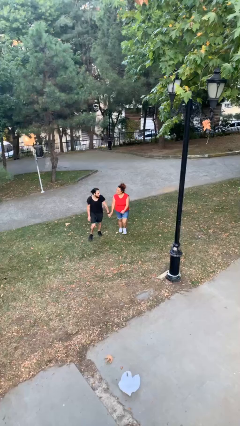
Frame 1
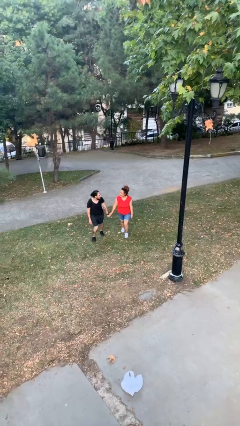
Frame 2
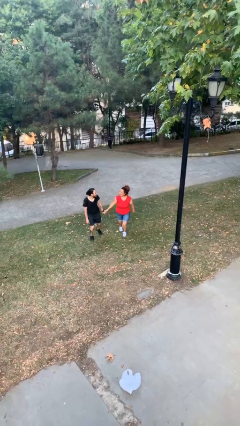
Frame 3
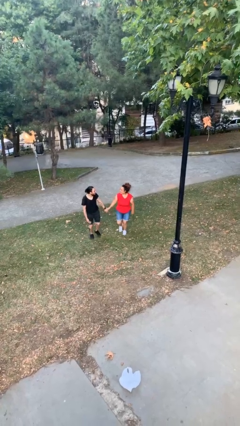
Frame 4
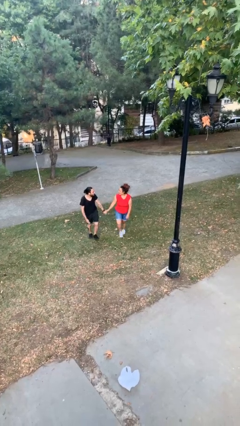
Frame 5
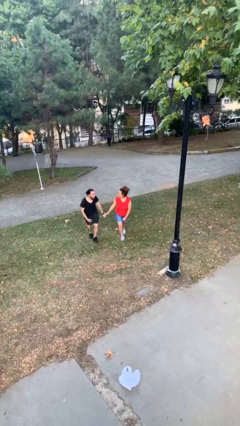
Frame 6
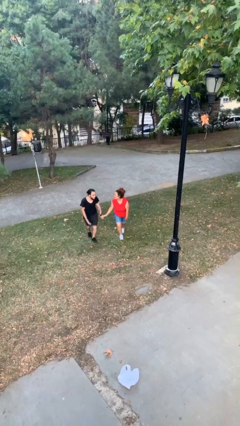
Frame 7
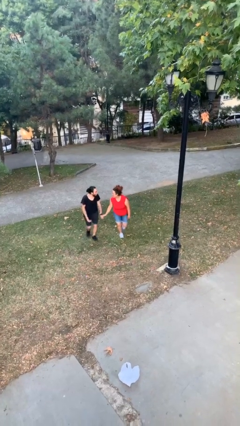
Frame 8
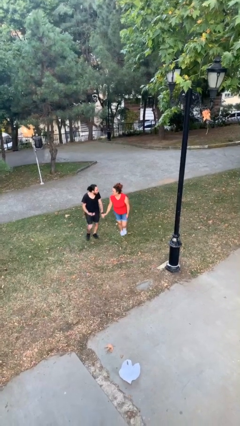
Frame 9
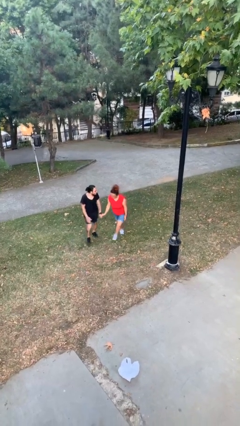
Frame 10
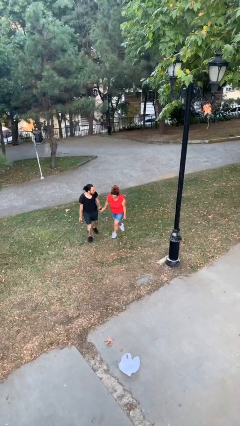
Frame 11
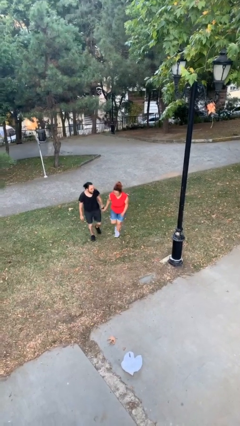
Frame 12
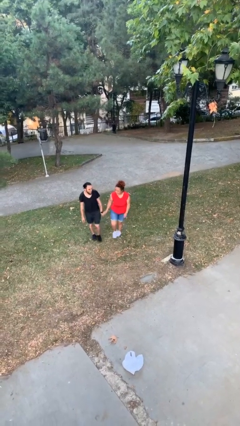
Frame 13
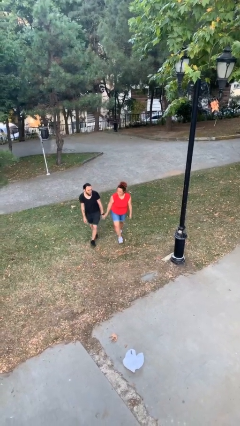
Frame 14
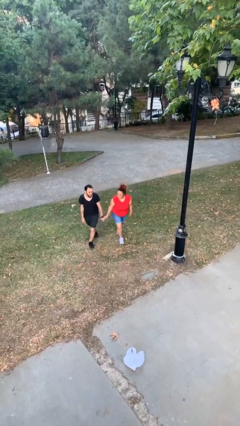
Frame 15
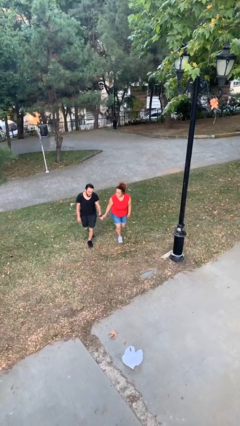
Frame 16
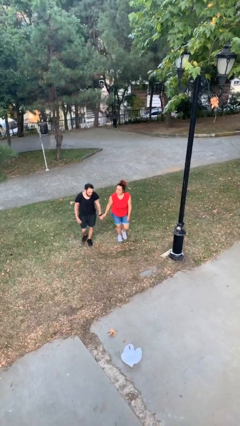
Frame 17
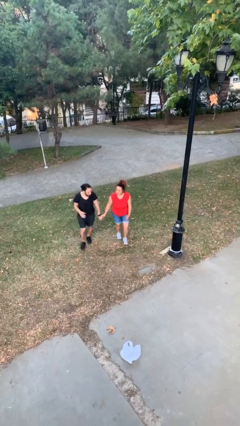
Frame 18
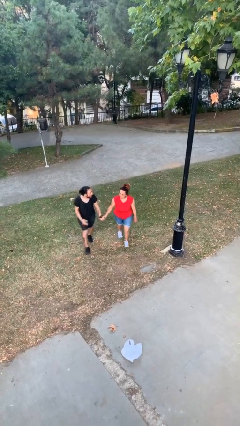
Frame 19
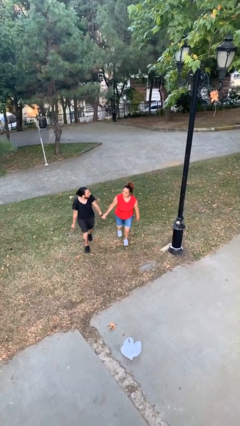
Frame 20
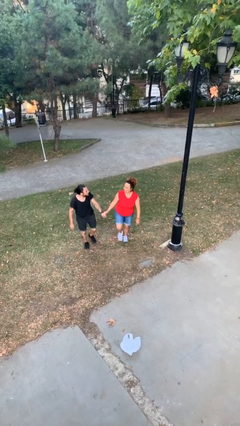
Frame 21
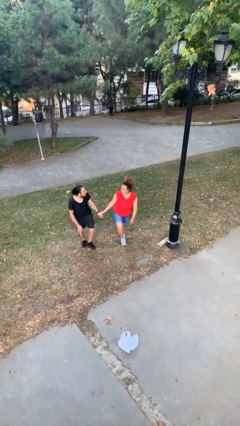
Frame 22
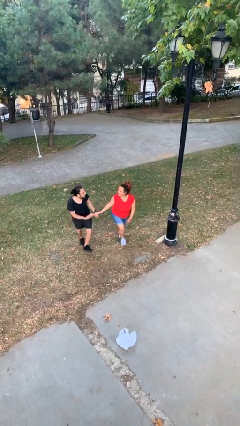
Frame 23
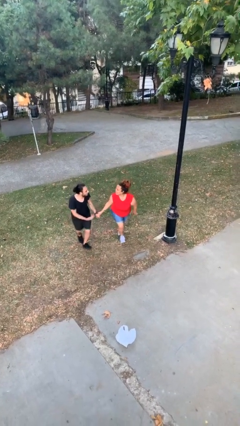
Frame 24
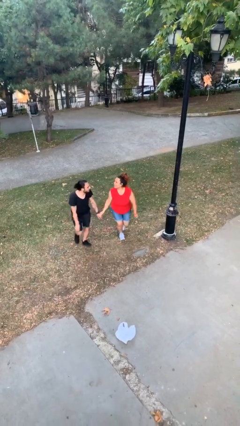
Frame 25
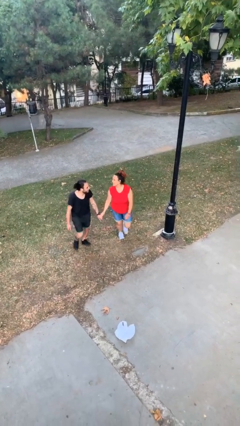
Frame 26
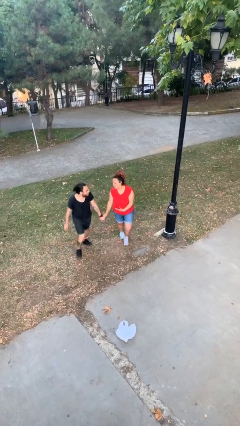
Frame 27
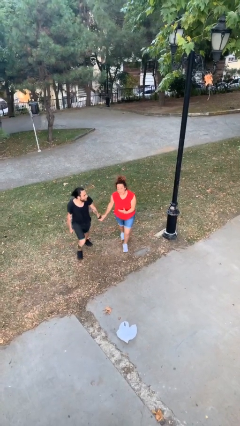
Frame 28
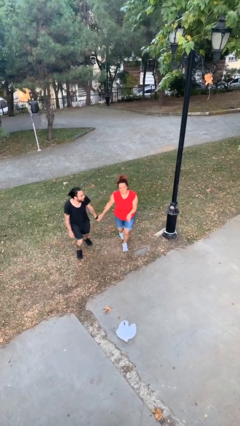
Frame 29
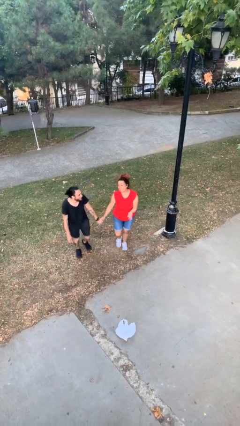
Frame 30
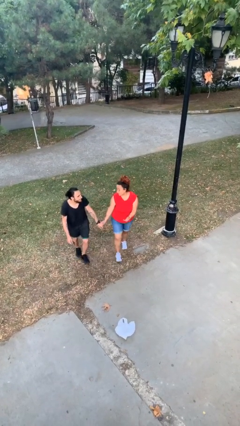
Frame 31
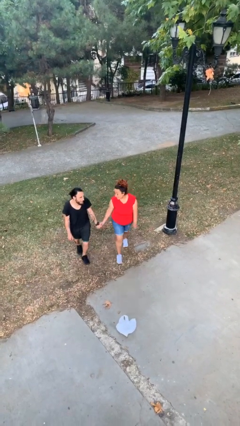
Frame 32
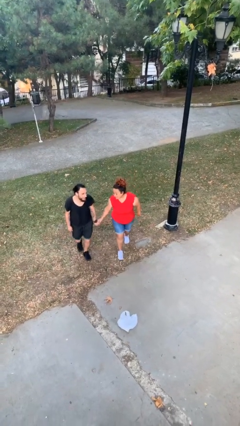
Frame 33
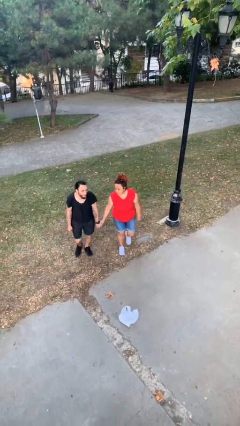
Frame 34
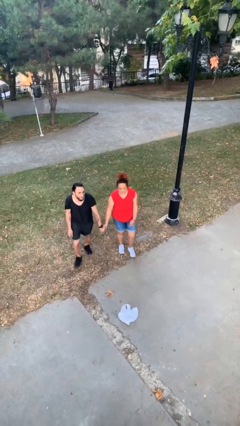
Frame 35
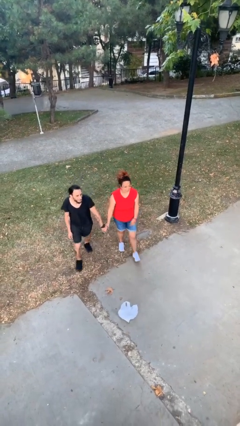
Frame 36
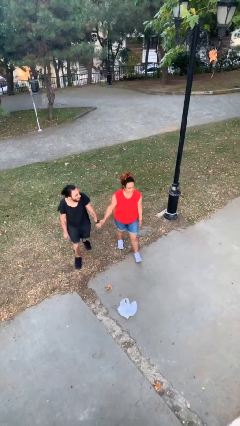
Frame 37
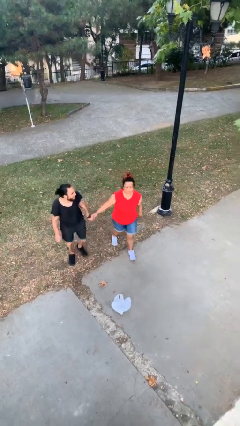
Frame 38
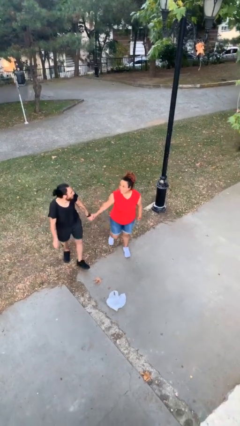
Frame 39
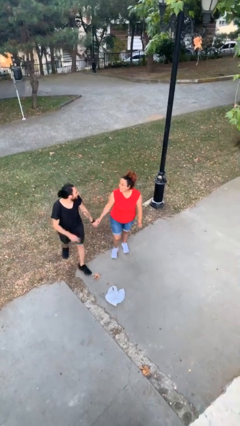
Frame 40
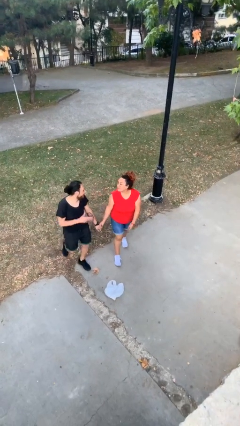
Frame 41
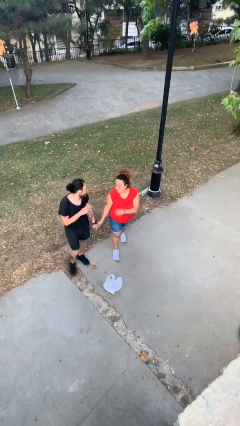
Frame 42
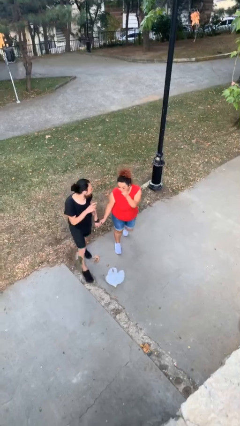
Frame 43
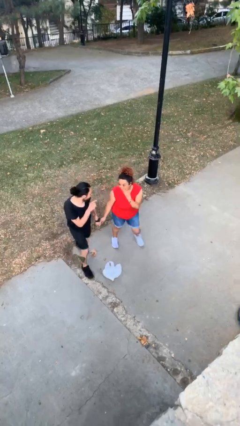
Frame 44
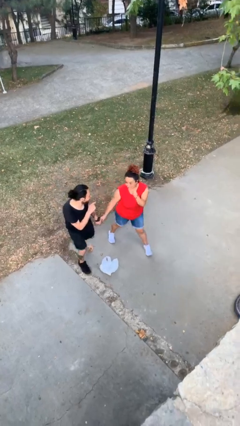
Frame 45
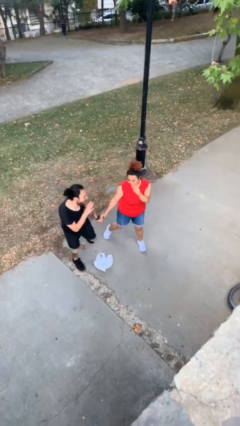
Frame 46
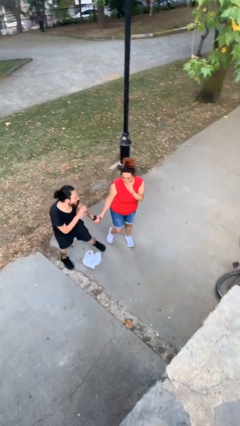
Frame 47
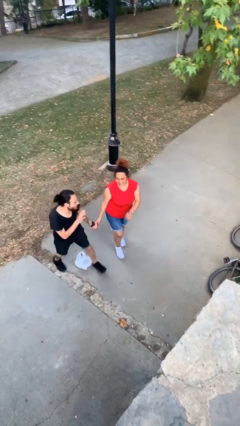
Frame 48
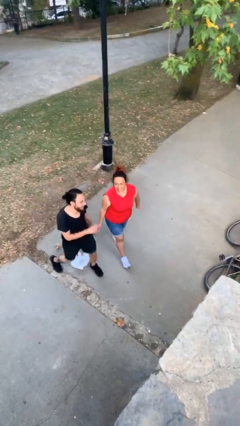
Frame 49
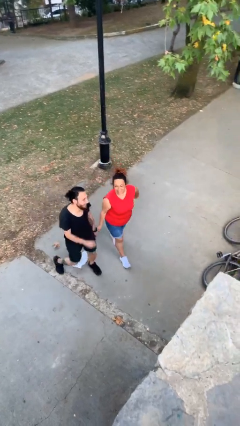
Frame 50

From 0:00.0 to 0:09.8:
person holds hand

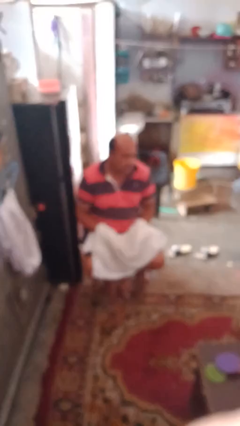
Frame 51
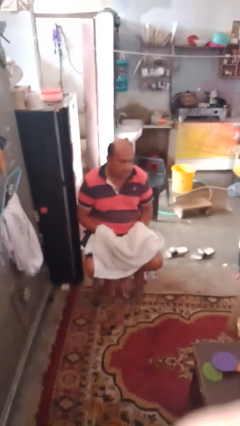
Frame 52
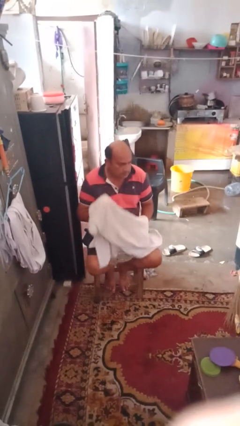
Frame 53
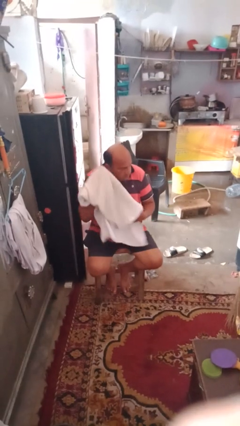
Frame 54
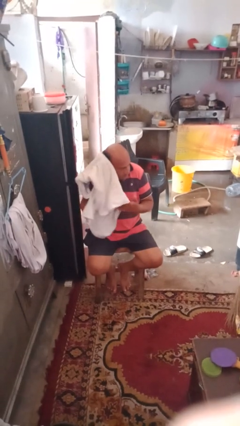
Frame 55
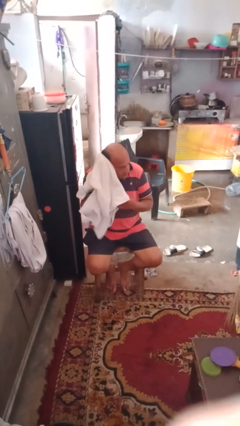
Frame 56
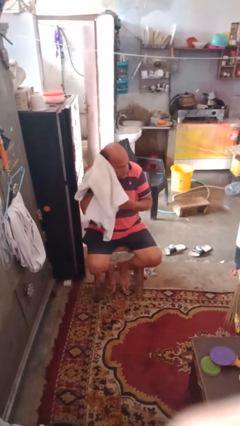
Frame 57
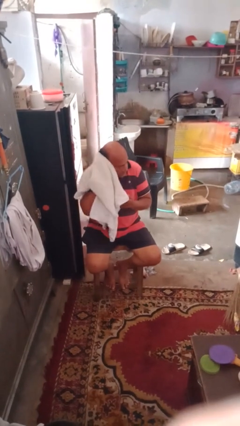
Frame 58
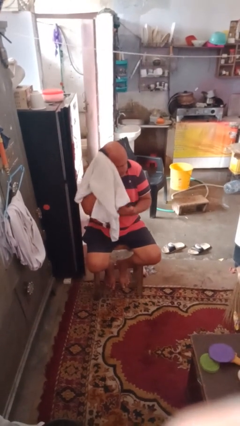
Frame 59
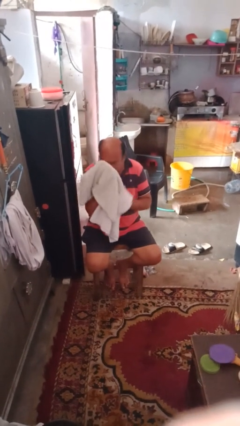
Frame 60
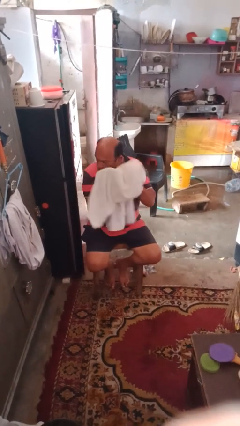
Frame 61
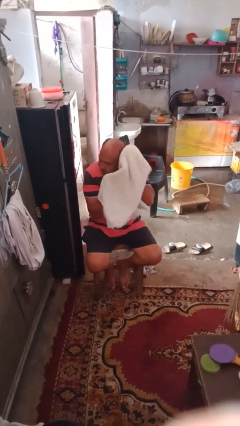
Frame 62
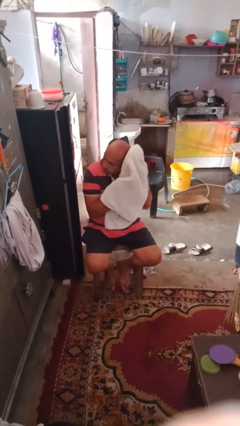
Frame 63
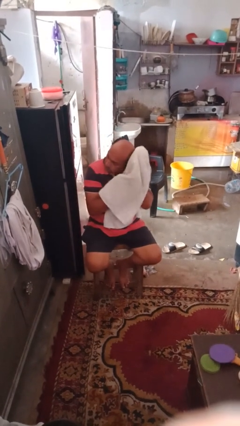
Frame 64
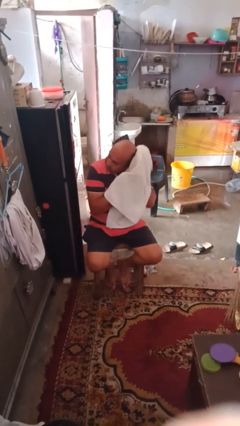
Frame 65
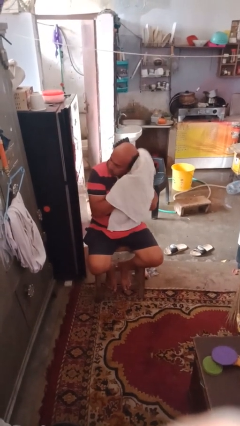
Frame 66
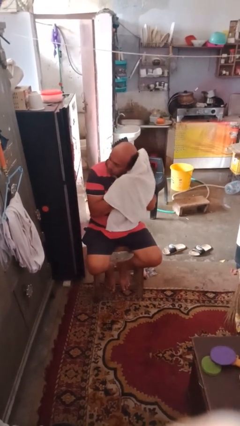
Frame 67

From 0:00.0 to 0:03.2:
person dries hair with towel

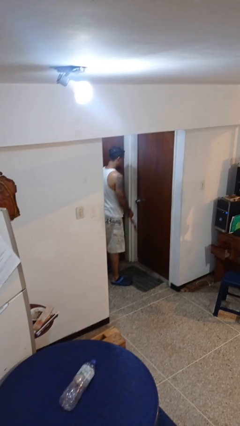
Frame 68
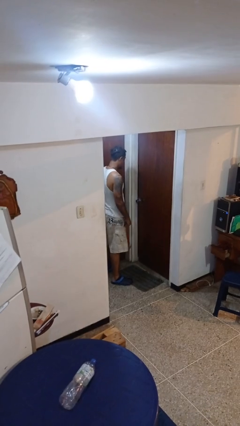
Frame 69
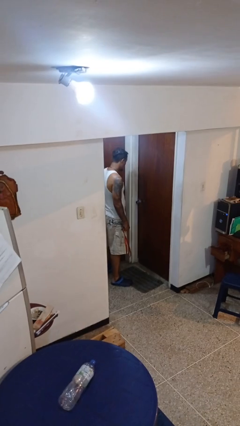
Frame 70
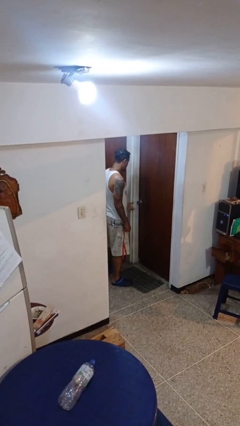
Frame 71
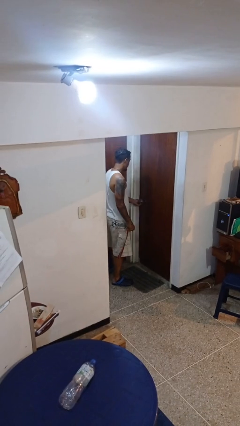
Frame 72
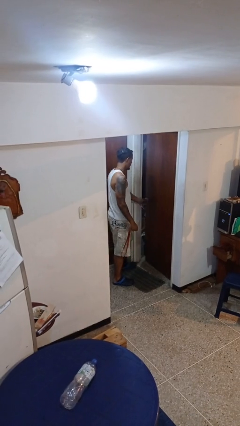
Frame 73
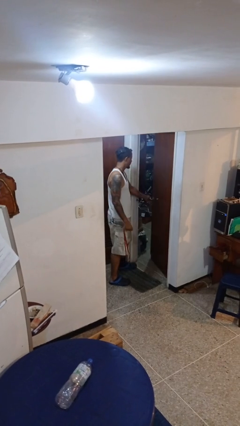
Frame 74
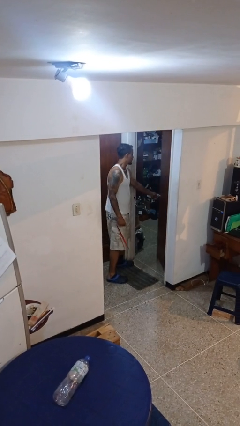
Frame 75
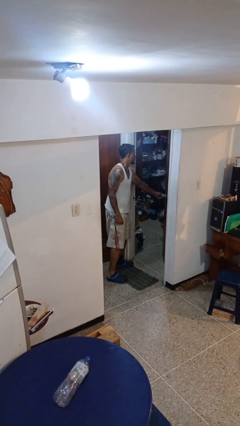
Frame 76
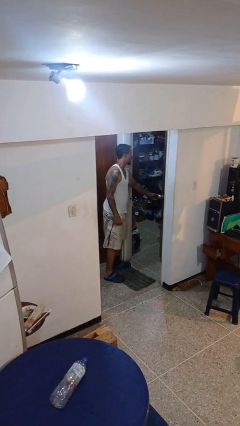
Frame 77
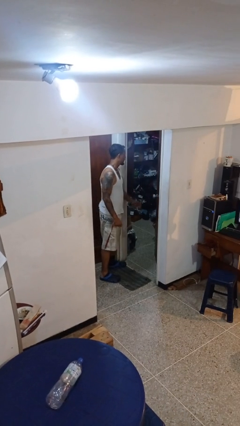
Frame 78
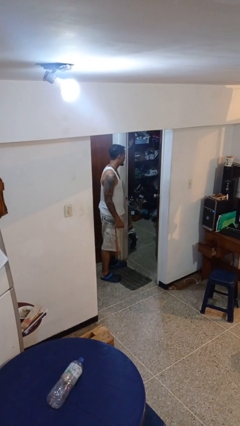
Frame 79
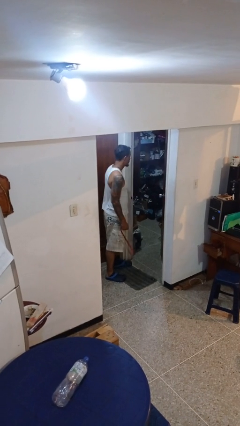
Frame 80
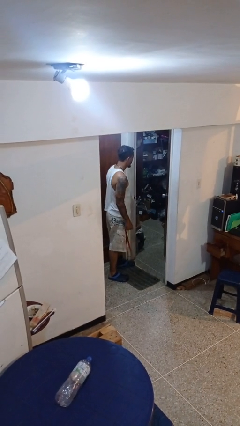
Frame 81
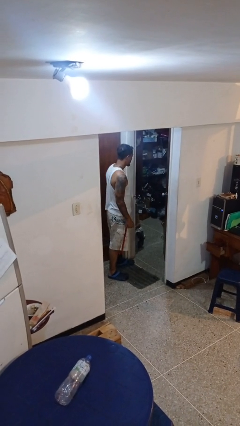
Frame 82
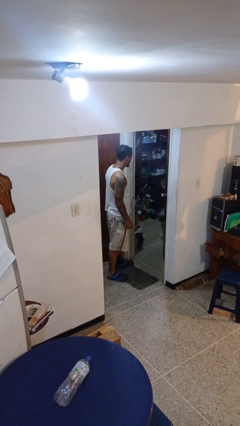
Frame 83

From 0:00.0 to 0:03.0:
person opens facility door

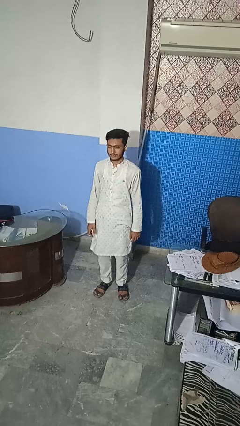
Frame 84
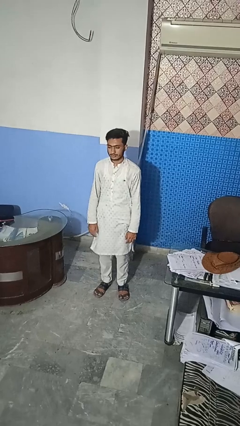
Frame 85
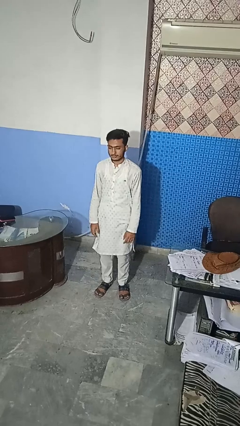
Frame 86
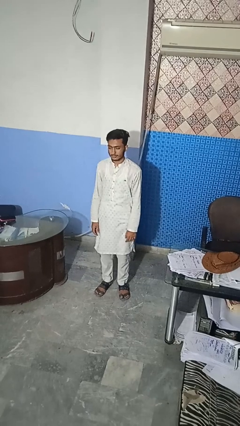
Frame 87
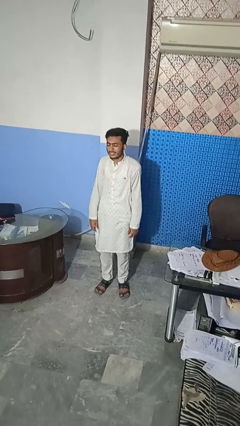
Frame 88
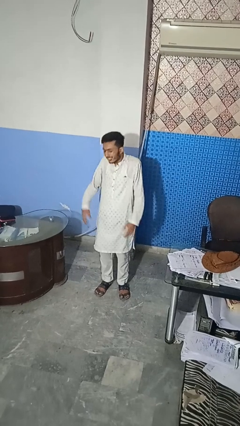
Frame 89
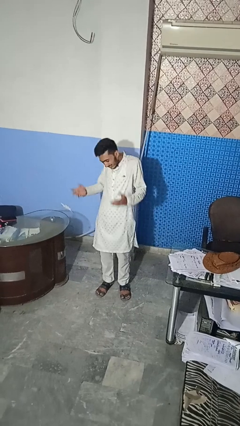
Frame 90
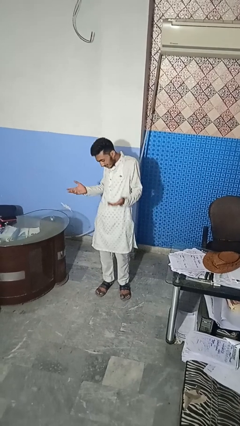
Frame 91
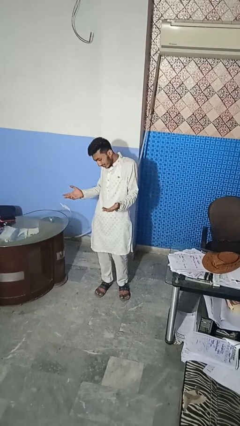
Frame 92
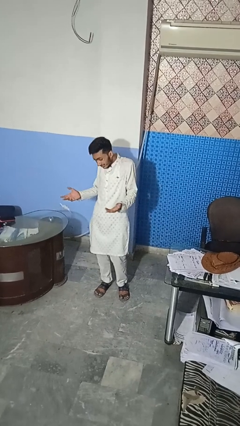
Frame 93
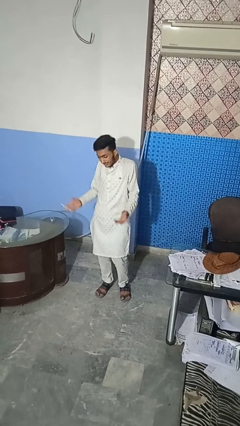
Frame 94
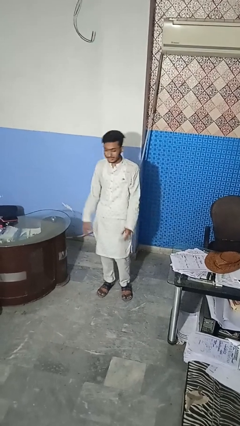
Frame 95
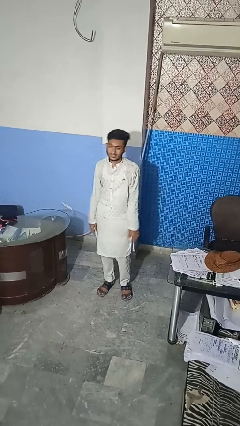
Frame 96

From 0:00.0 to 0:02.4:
person shrugs
